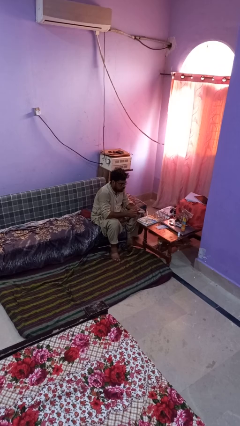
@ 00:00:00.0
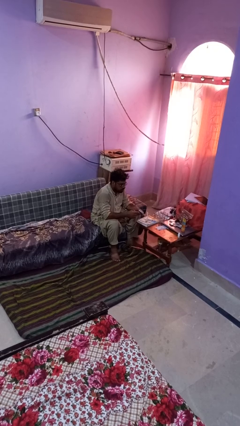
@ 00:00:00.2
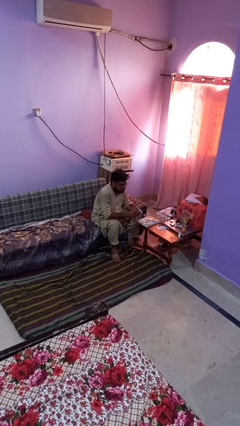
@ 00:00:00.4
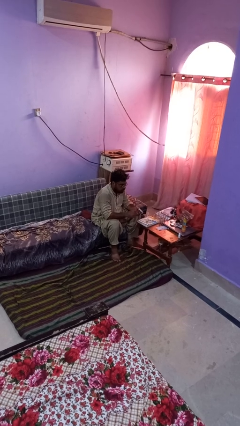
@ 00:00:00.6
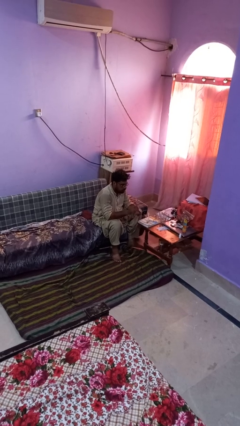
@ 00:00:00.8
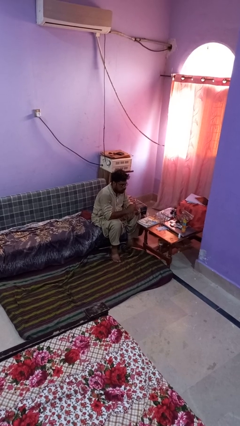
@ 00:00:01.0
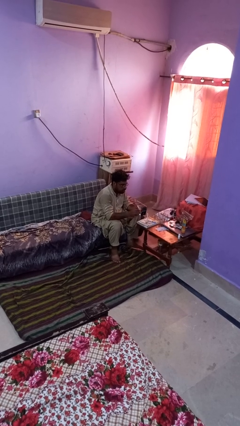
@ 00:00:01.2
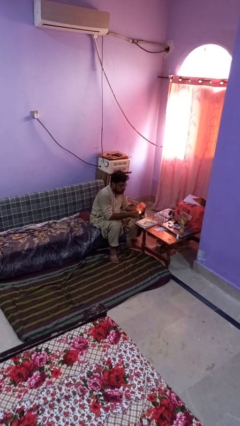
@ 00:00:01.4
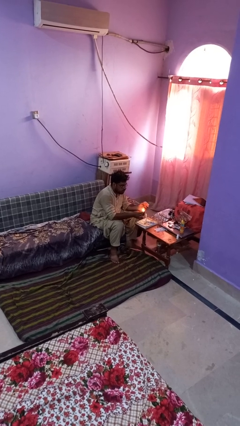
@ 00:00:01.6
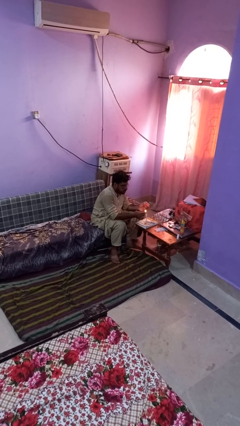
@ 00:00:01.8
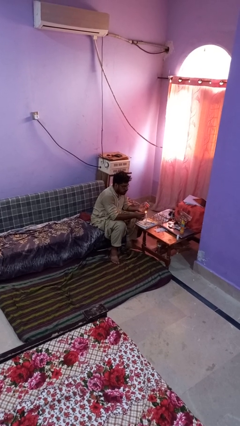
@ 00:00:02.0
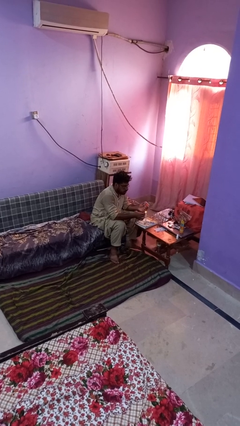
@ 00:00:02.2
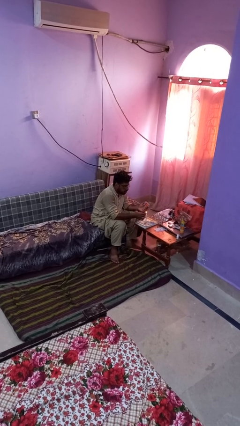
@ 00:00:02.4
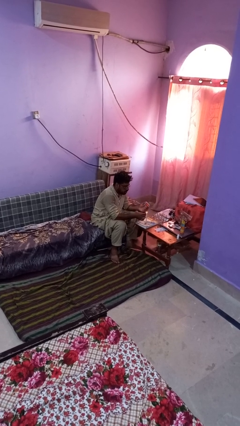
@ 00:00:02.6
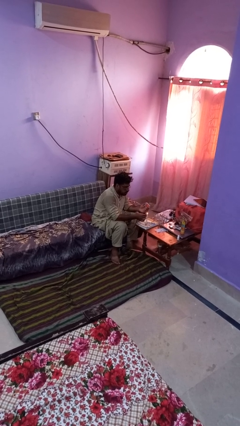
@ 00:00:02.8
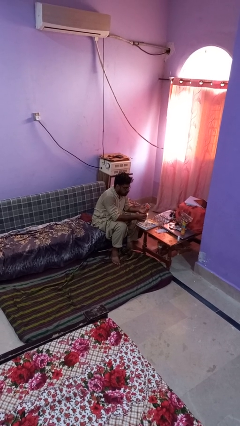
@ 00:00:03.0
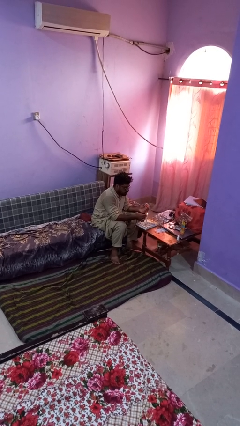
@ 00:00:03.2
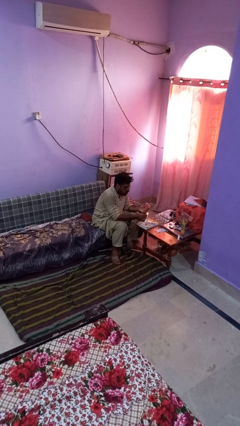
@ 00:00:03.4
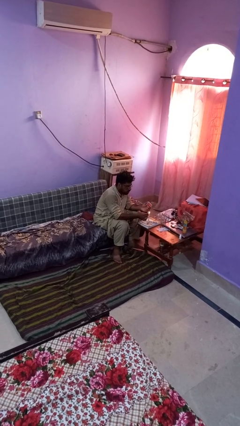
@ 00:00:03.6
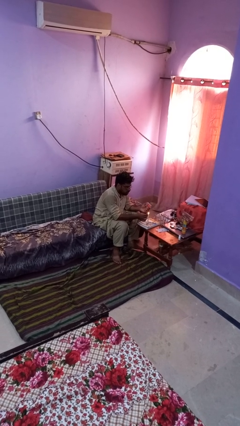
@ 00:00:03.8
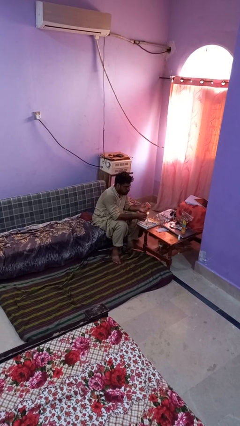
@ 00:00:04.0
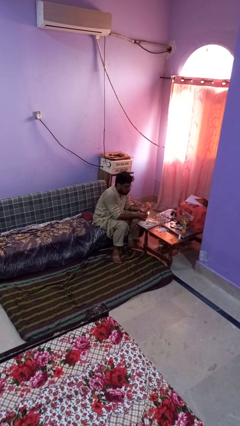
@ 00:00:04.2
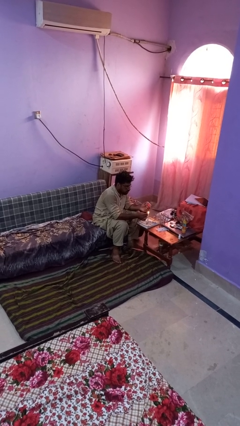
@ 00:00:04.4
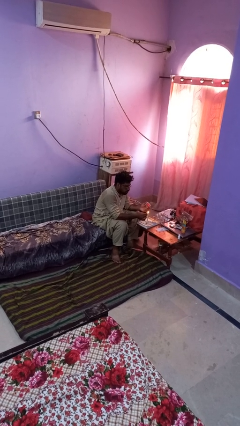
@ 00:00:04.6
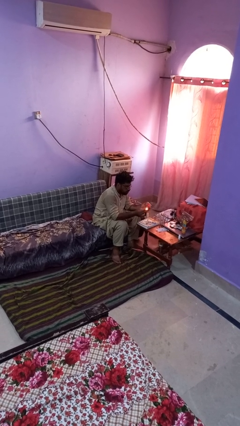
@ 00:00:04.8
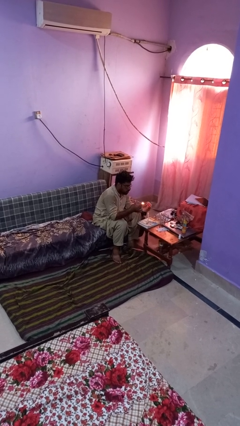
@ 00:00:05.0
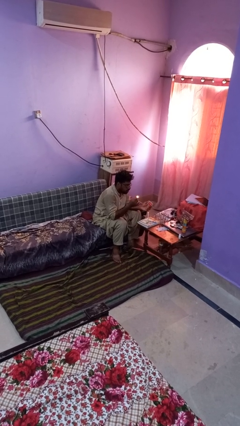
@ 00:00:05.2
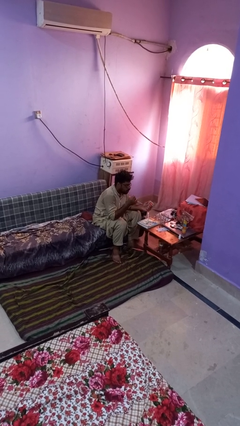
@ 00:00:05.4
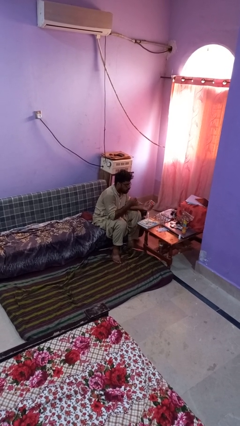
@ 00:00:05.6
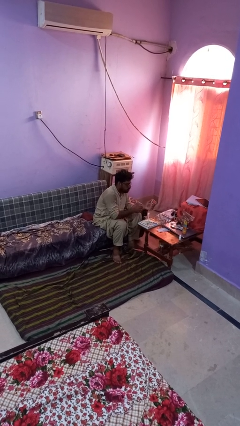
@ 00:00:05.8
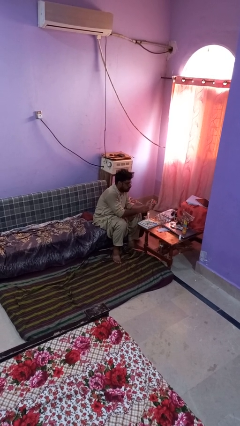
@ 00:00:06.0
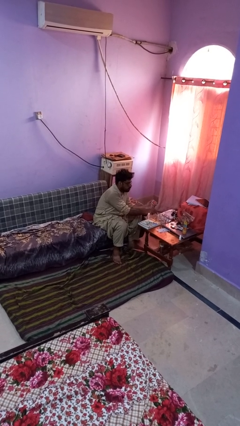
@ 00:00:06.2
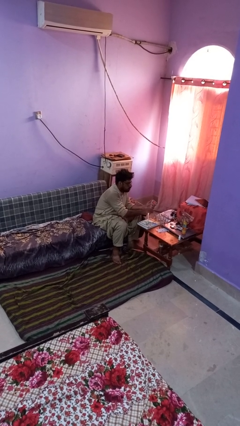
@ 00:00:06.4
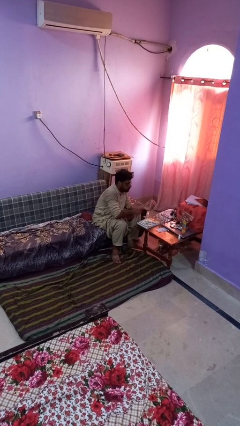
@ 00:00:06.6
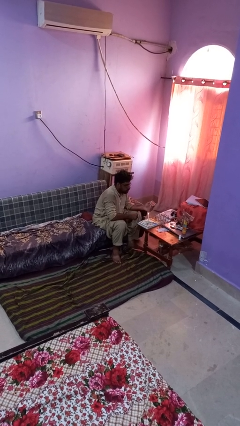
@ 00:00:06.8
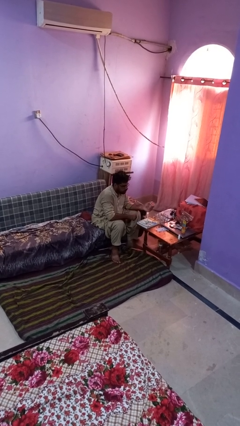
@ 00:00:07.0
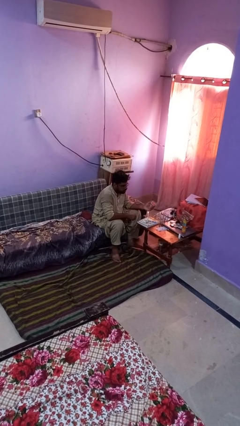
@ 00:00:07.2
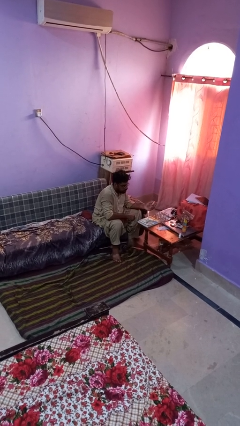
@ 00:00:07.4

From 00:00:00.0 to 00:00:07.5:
person lights candle

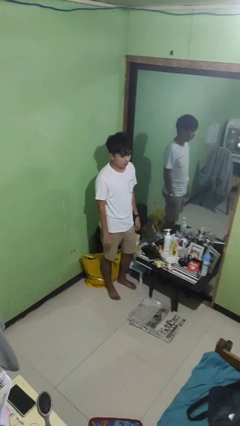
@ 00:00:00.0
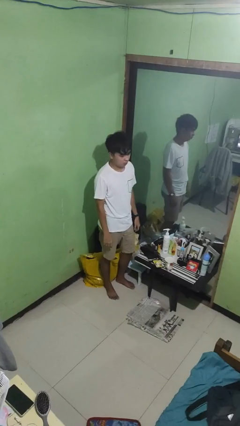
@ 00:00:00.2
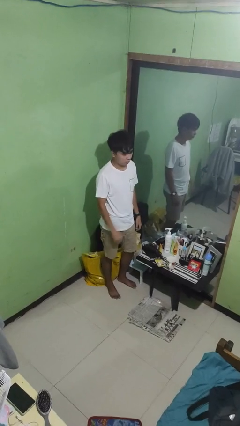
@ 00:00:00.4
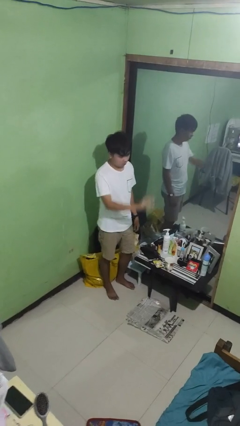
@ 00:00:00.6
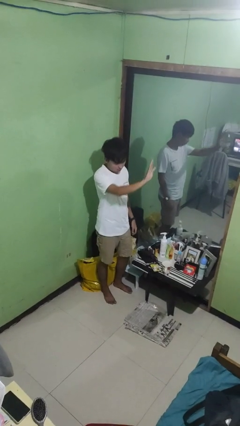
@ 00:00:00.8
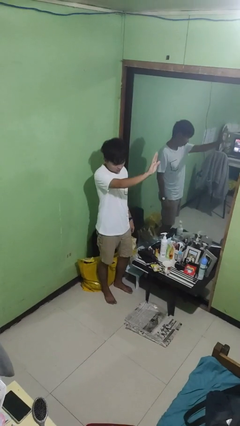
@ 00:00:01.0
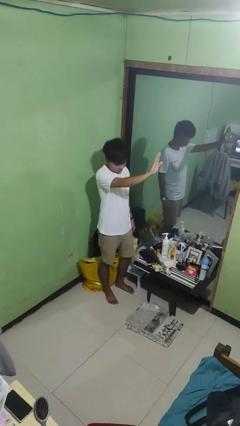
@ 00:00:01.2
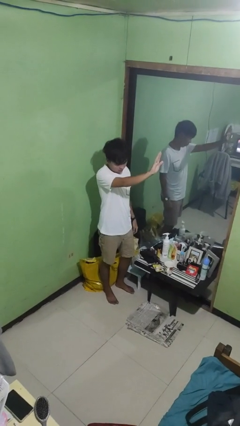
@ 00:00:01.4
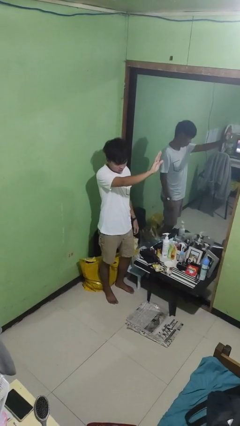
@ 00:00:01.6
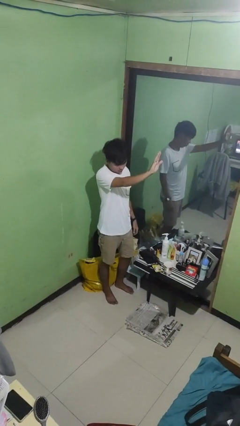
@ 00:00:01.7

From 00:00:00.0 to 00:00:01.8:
person gestures stop

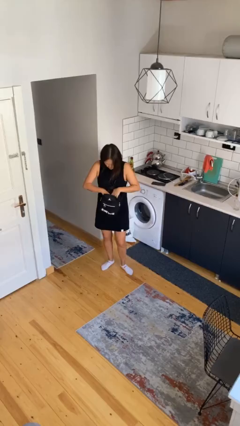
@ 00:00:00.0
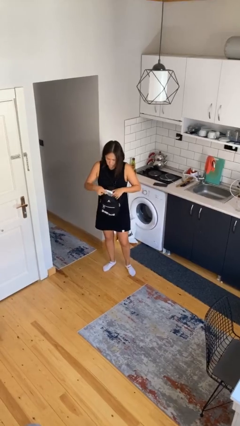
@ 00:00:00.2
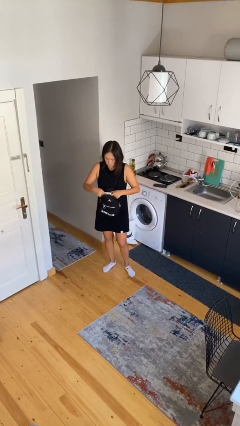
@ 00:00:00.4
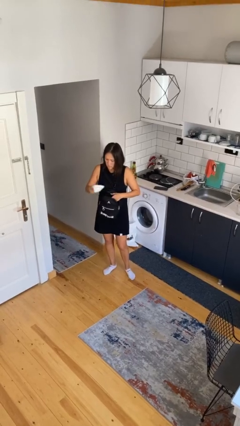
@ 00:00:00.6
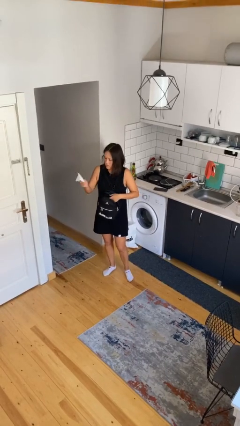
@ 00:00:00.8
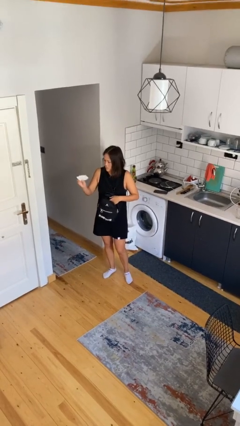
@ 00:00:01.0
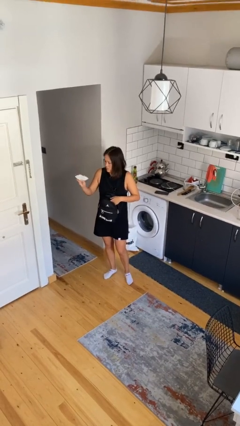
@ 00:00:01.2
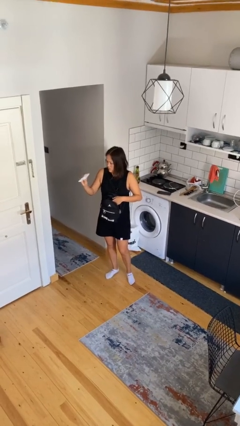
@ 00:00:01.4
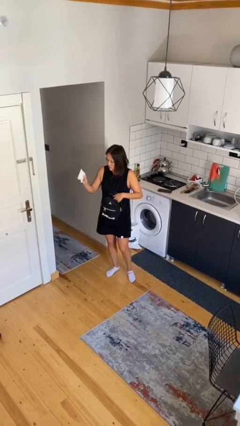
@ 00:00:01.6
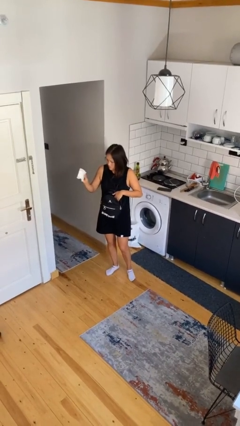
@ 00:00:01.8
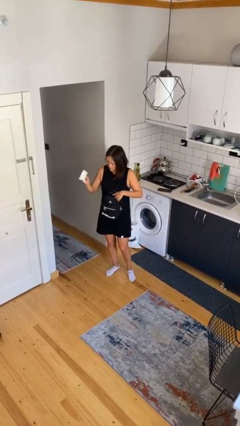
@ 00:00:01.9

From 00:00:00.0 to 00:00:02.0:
person takes object from backpack

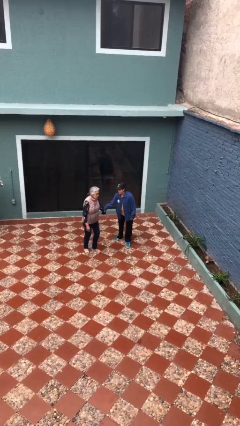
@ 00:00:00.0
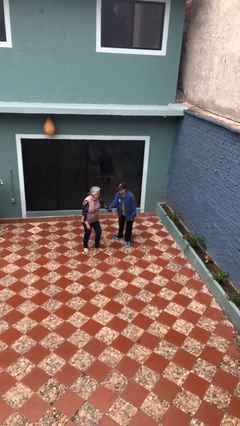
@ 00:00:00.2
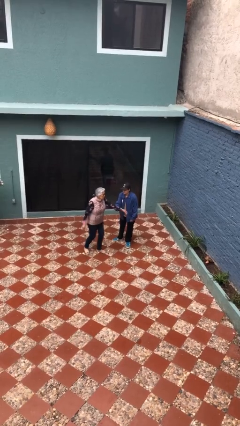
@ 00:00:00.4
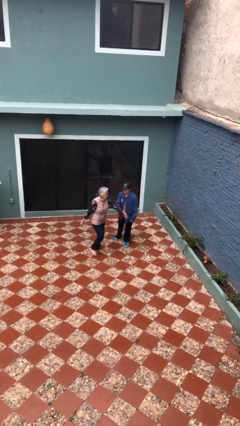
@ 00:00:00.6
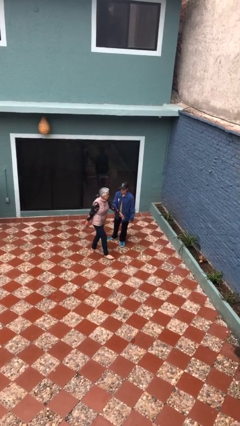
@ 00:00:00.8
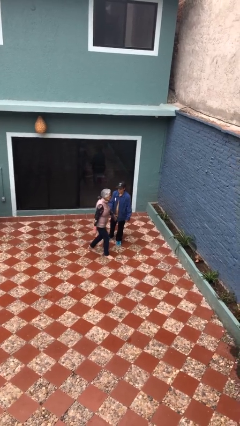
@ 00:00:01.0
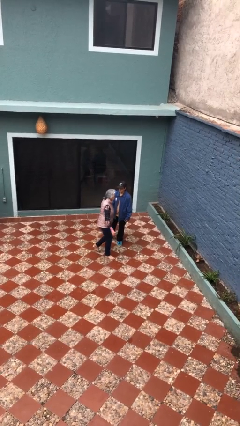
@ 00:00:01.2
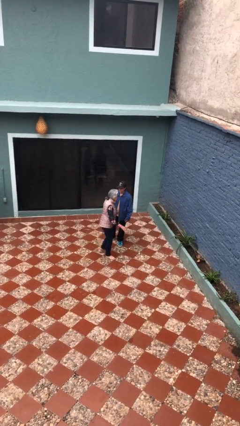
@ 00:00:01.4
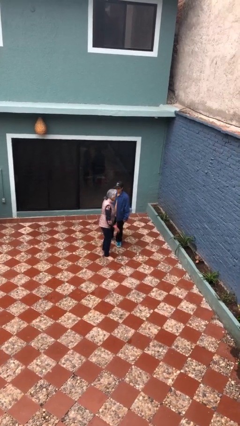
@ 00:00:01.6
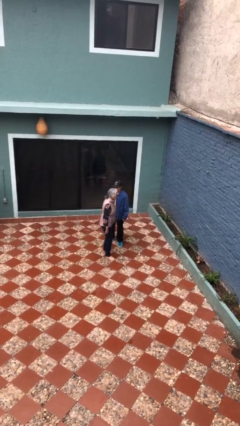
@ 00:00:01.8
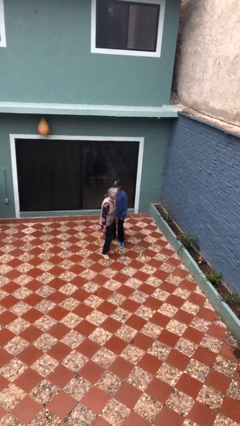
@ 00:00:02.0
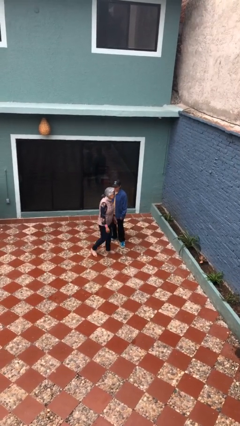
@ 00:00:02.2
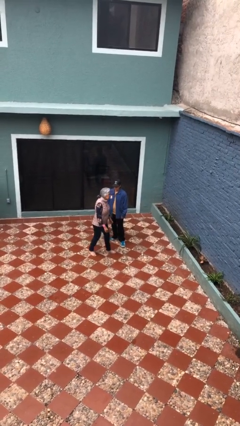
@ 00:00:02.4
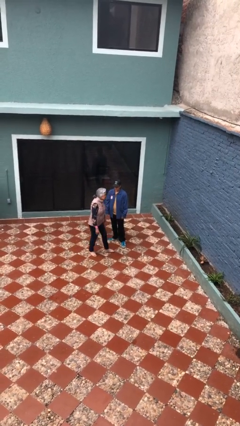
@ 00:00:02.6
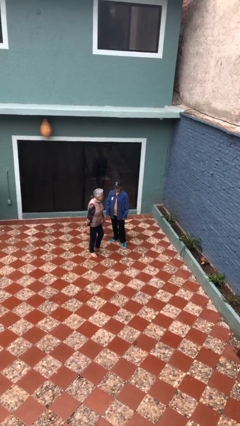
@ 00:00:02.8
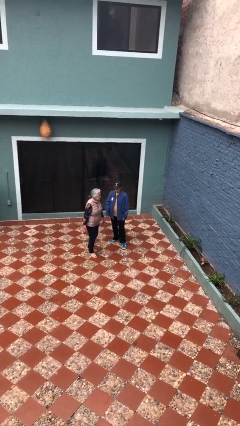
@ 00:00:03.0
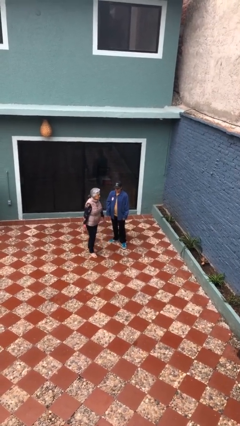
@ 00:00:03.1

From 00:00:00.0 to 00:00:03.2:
person grabs person by forearm

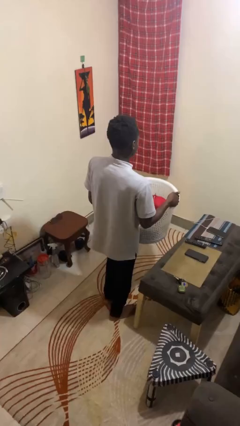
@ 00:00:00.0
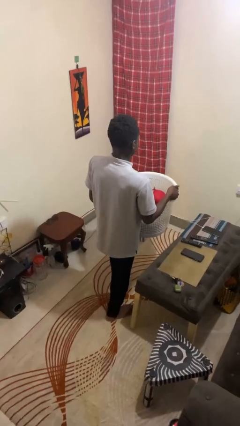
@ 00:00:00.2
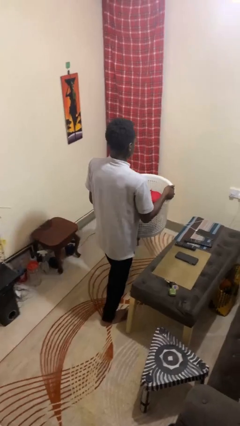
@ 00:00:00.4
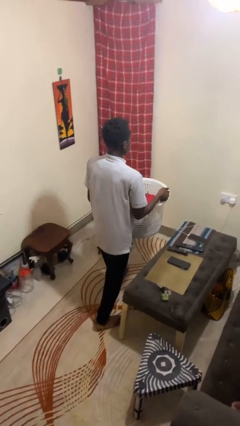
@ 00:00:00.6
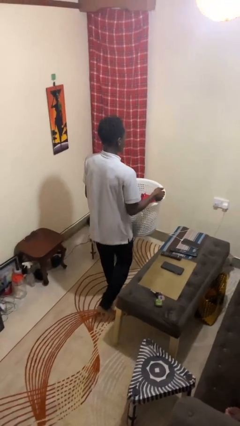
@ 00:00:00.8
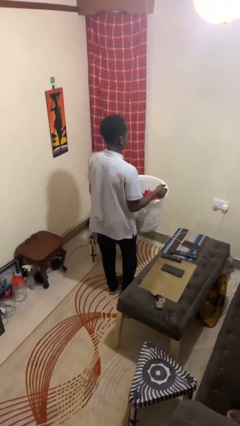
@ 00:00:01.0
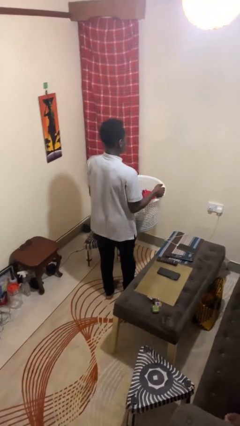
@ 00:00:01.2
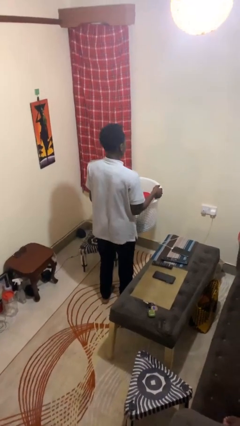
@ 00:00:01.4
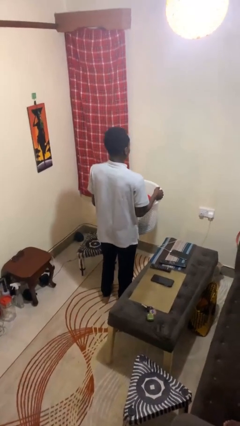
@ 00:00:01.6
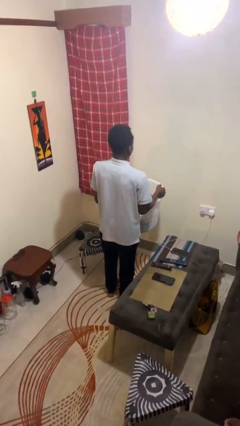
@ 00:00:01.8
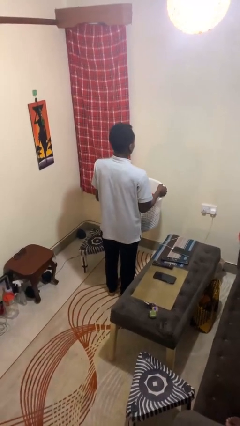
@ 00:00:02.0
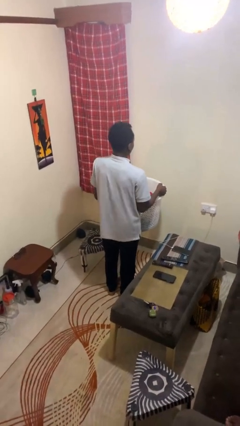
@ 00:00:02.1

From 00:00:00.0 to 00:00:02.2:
person carries laundry basket

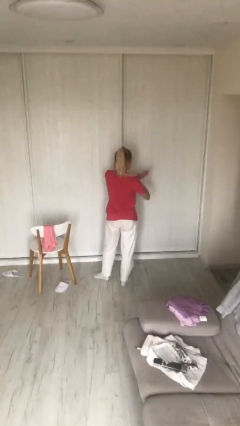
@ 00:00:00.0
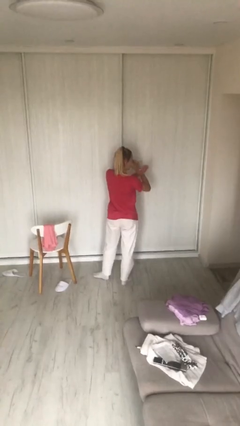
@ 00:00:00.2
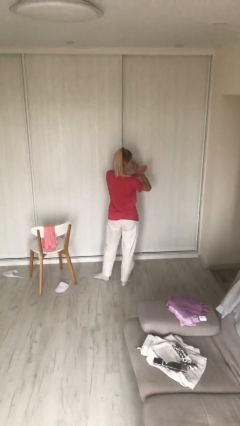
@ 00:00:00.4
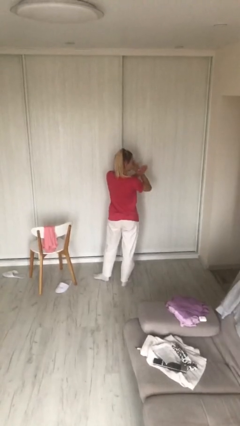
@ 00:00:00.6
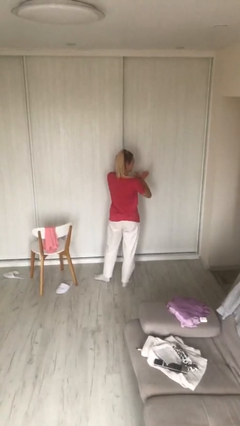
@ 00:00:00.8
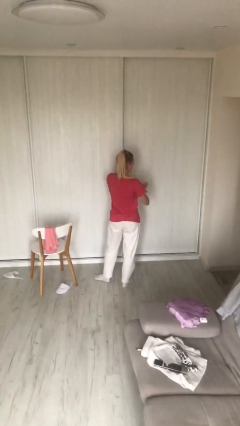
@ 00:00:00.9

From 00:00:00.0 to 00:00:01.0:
person gestures arms x
